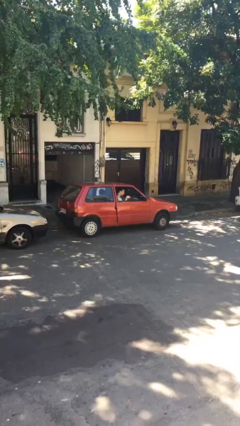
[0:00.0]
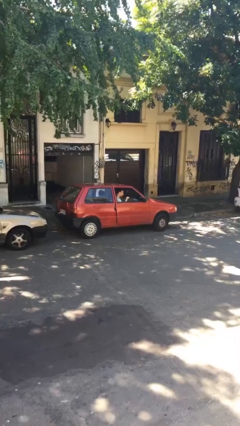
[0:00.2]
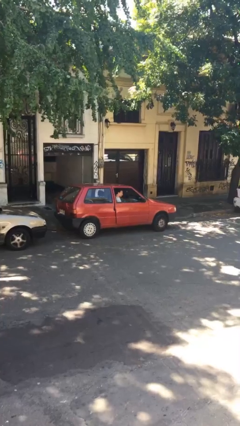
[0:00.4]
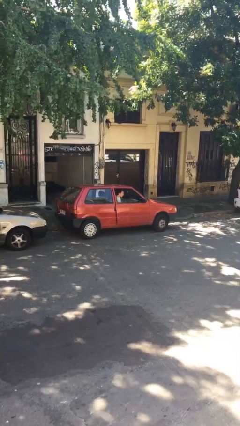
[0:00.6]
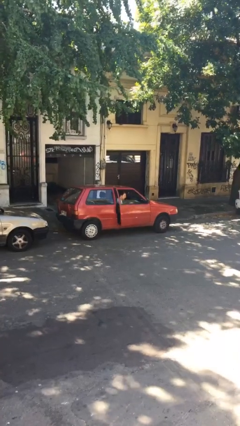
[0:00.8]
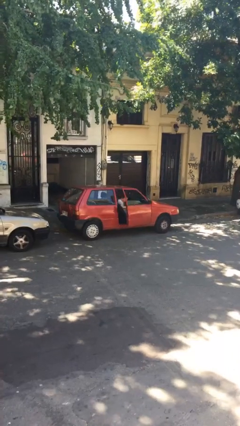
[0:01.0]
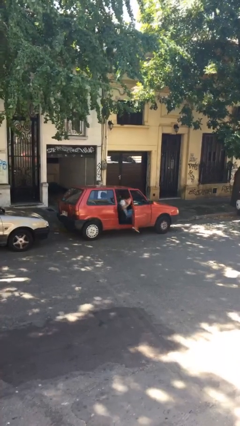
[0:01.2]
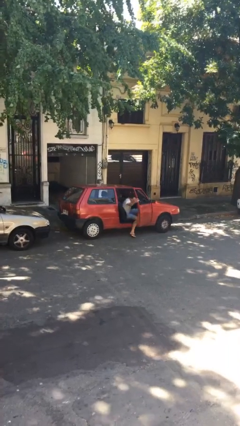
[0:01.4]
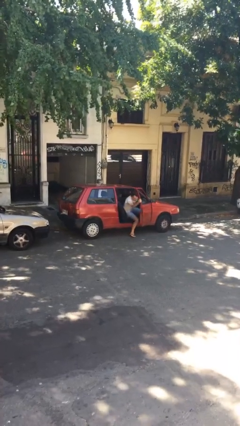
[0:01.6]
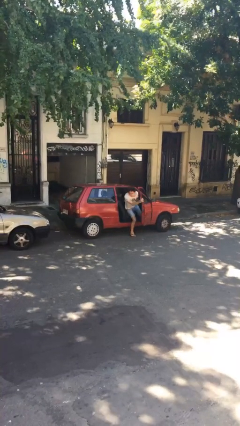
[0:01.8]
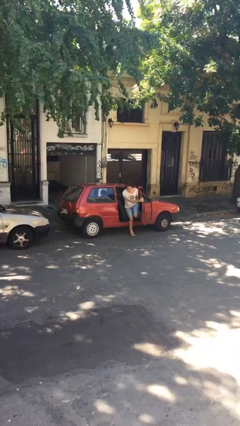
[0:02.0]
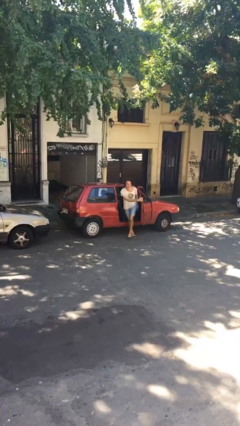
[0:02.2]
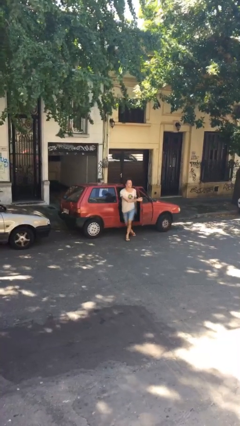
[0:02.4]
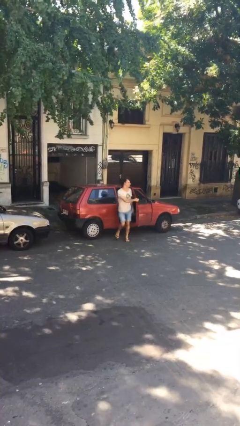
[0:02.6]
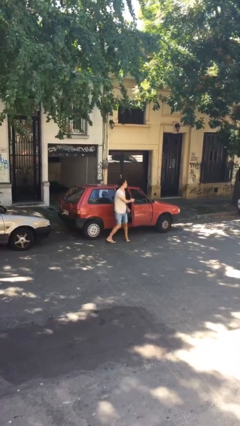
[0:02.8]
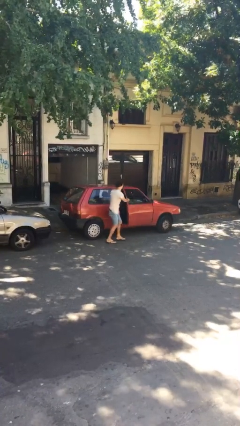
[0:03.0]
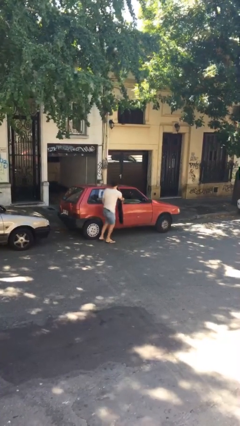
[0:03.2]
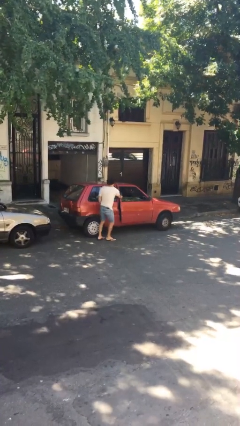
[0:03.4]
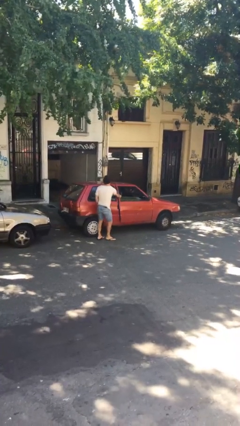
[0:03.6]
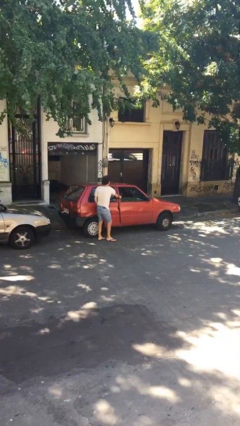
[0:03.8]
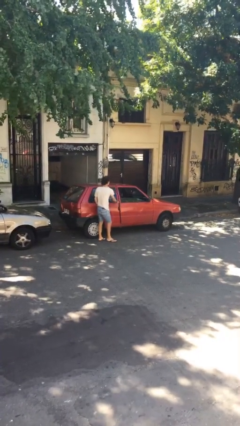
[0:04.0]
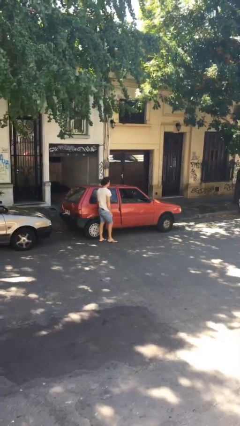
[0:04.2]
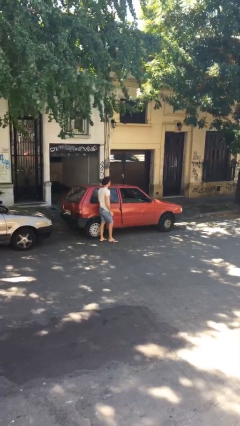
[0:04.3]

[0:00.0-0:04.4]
car drops off person

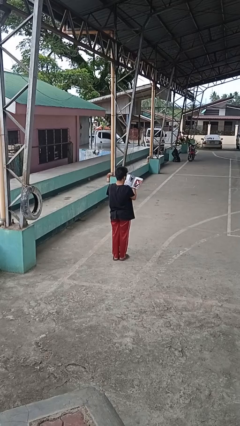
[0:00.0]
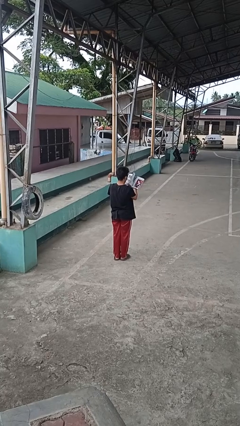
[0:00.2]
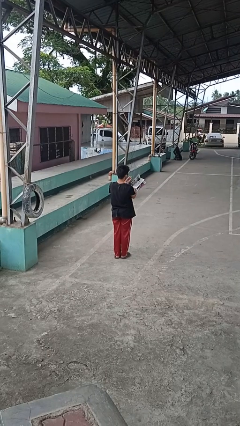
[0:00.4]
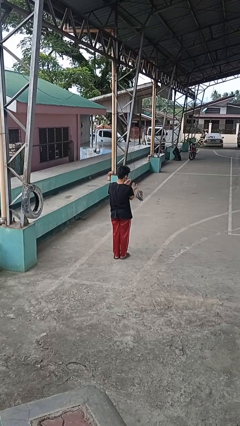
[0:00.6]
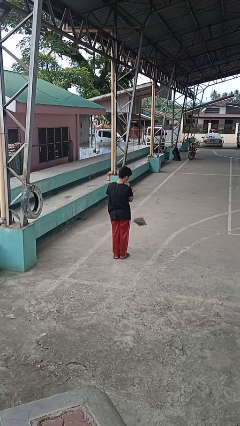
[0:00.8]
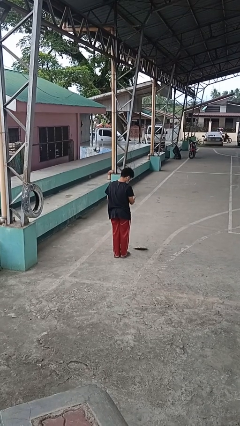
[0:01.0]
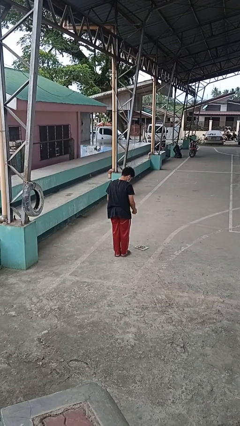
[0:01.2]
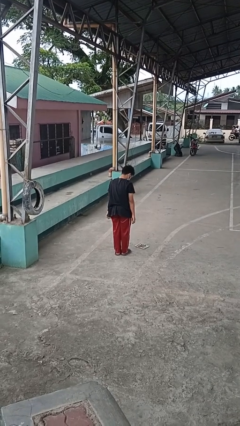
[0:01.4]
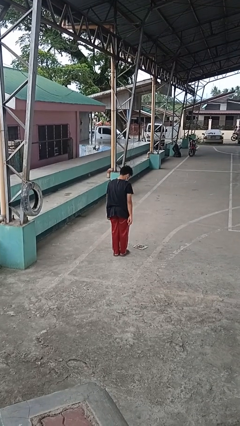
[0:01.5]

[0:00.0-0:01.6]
person drops object

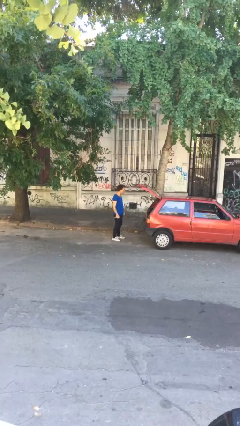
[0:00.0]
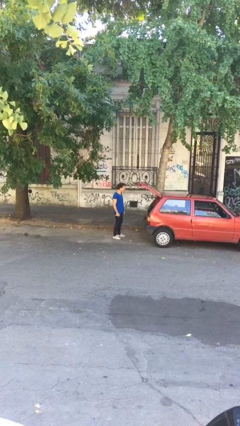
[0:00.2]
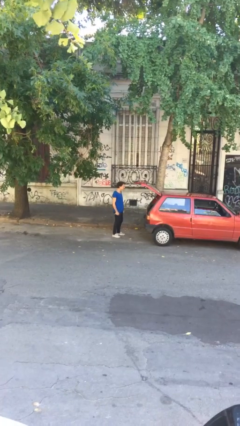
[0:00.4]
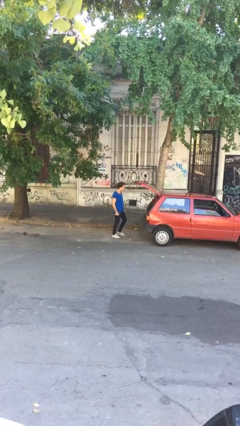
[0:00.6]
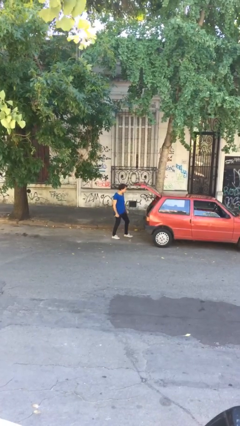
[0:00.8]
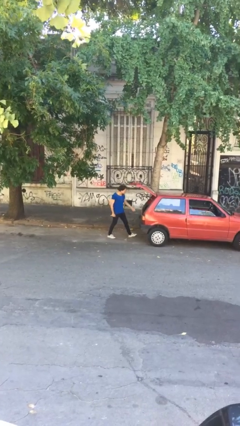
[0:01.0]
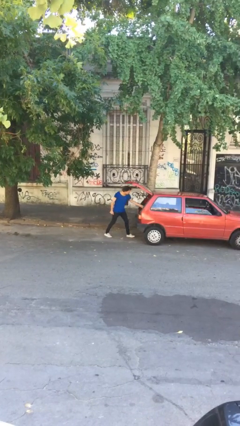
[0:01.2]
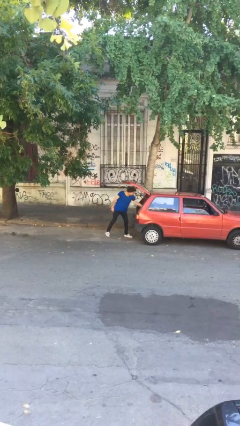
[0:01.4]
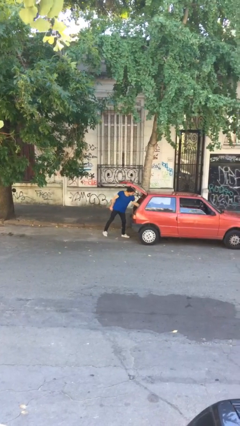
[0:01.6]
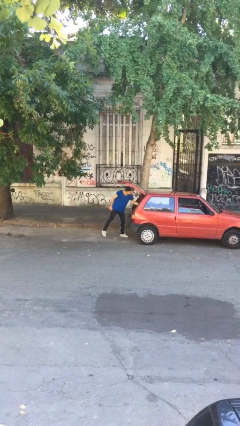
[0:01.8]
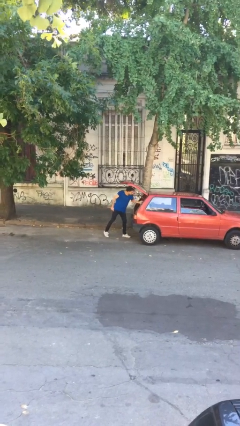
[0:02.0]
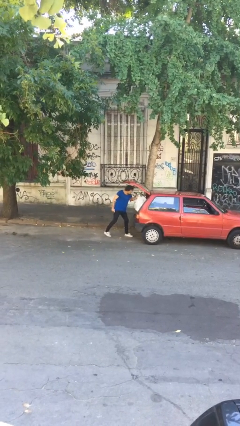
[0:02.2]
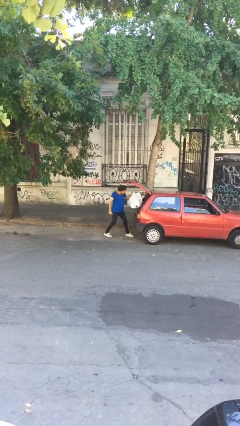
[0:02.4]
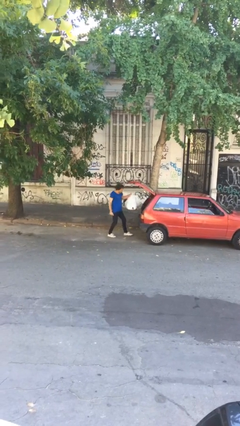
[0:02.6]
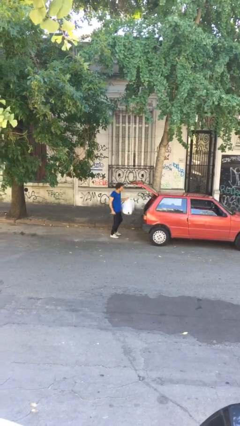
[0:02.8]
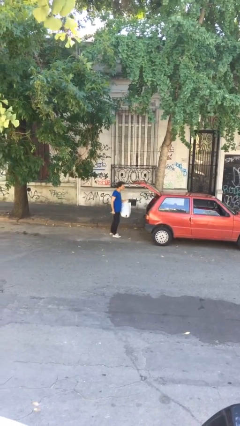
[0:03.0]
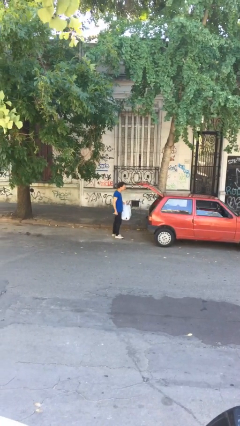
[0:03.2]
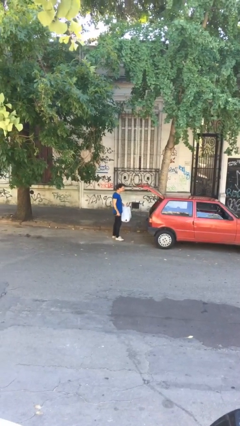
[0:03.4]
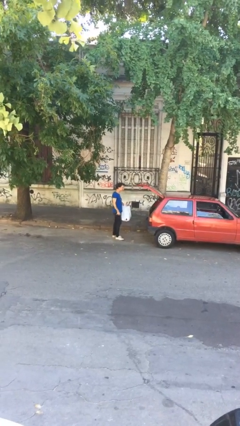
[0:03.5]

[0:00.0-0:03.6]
person unloads car

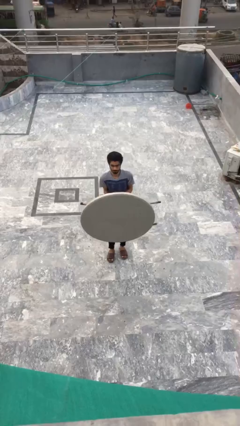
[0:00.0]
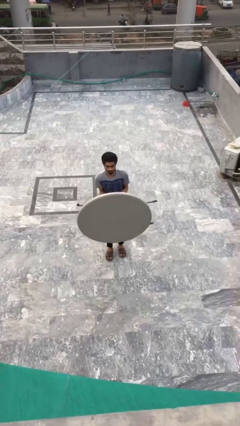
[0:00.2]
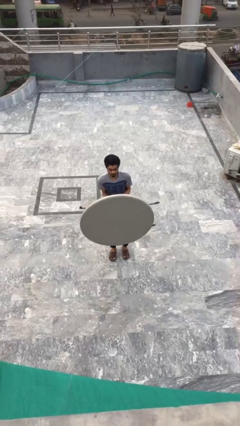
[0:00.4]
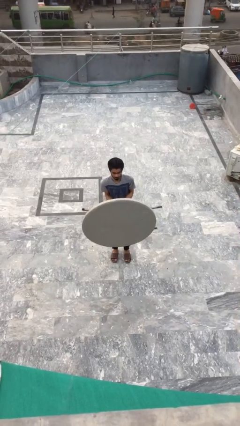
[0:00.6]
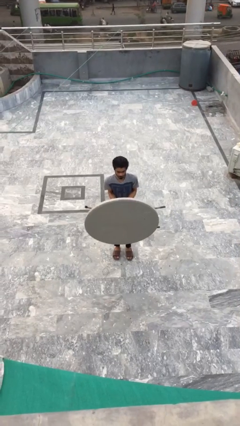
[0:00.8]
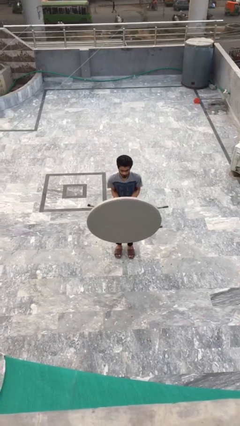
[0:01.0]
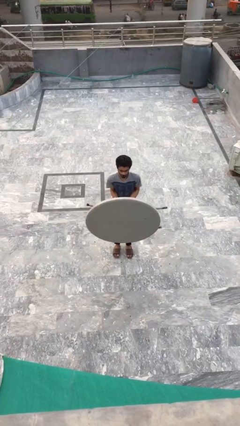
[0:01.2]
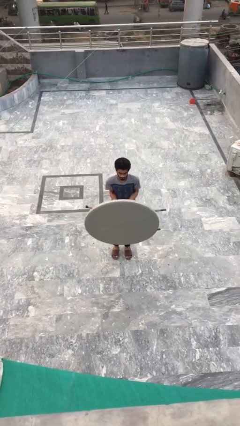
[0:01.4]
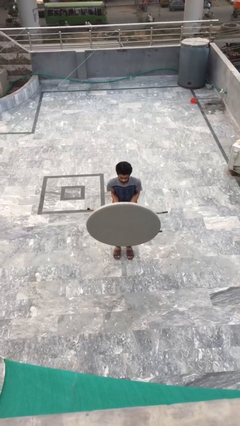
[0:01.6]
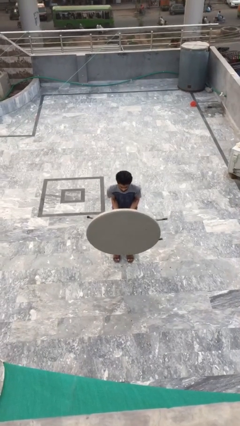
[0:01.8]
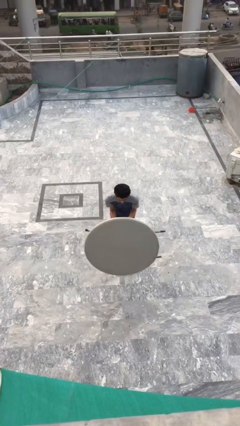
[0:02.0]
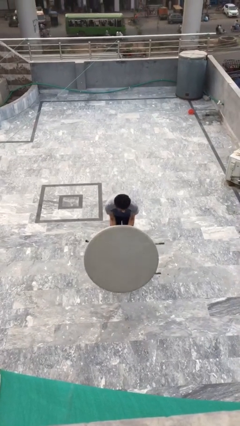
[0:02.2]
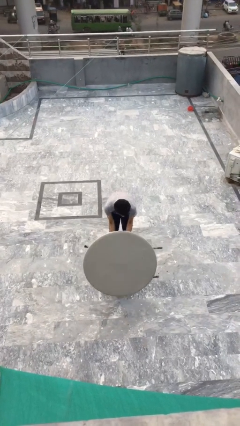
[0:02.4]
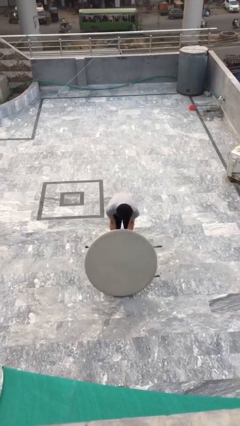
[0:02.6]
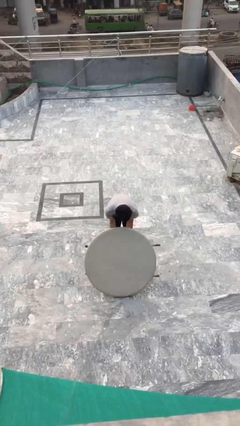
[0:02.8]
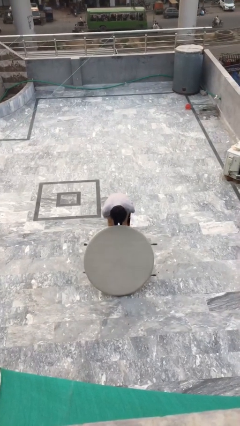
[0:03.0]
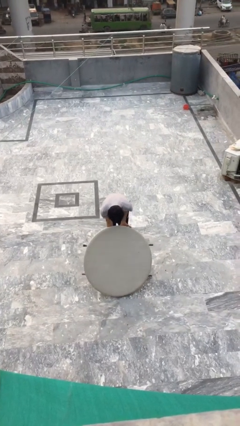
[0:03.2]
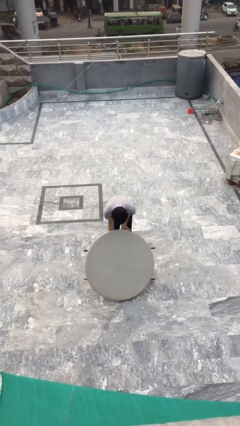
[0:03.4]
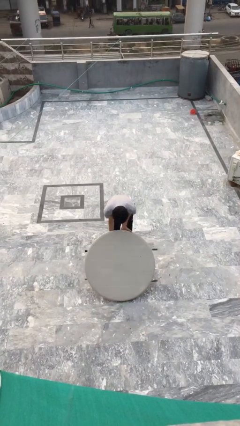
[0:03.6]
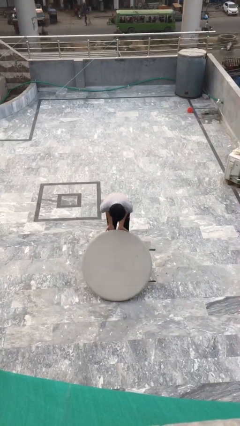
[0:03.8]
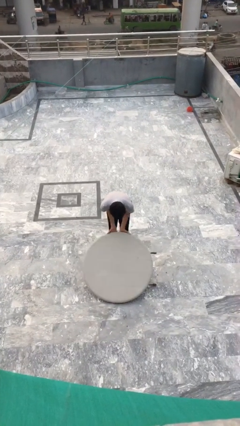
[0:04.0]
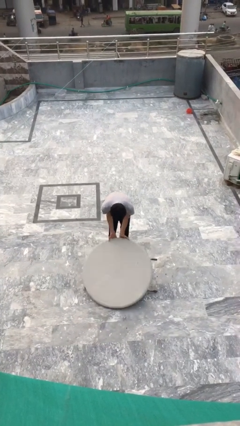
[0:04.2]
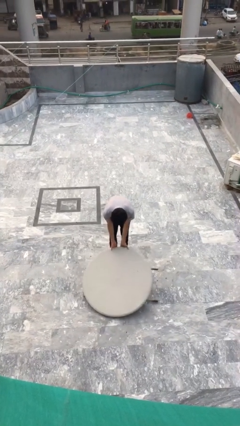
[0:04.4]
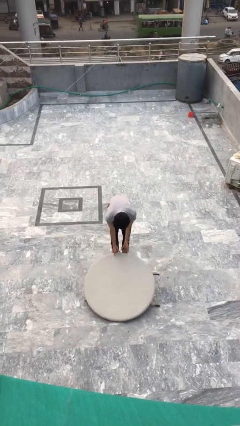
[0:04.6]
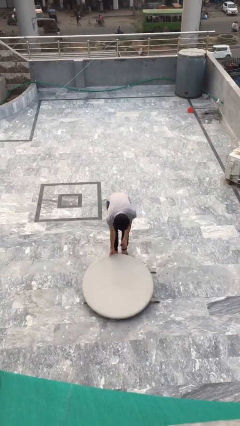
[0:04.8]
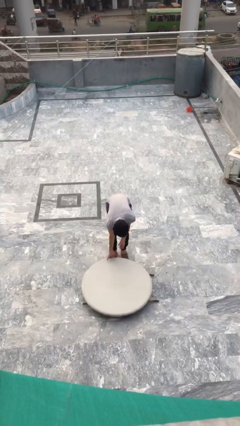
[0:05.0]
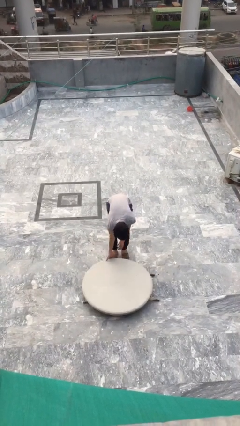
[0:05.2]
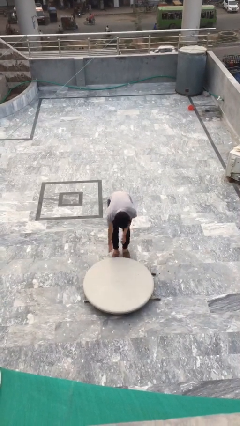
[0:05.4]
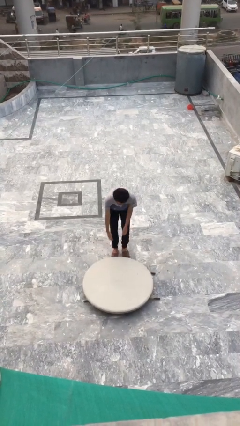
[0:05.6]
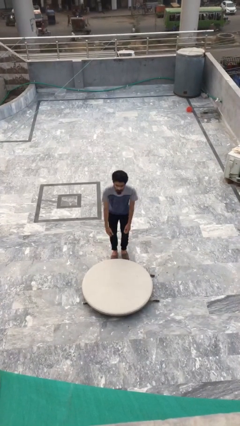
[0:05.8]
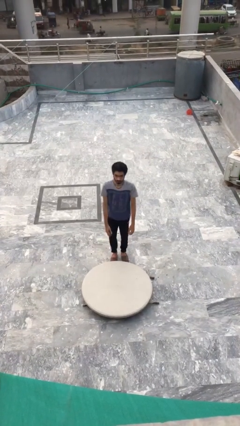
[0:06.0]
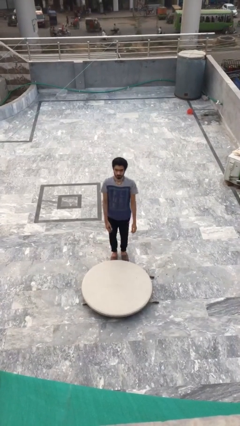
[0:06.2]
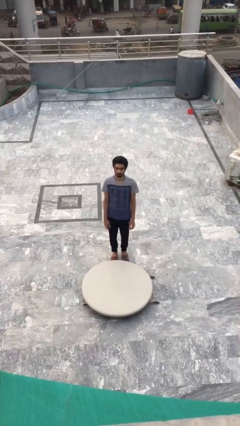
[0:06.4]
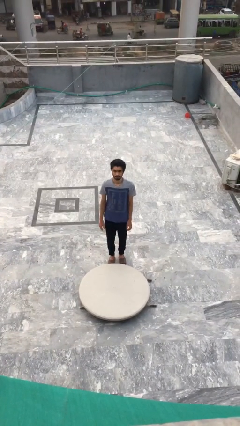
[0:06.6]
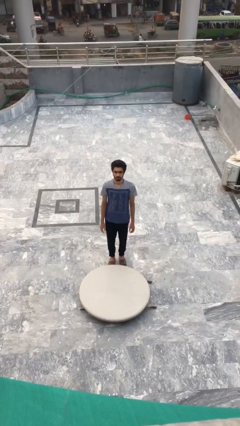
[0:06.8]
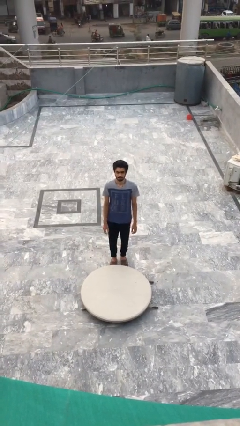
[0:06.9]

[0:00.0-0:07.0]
person puts down object on floor

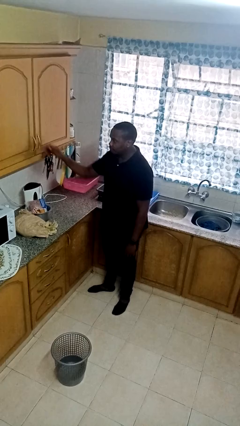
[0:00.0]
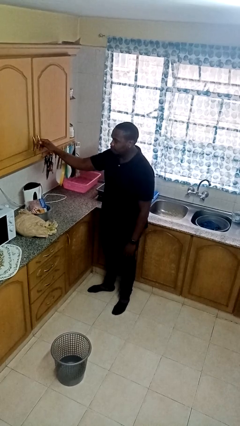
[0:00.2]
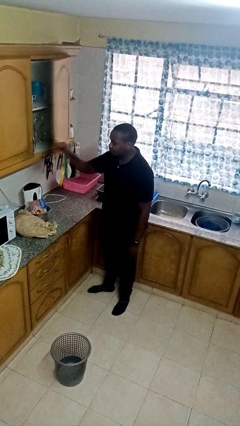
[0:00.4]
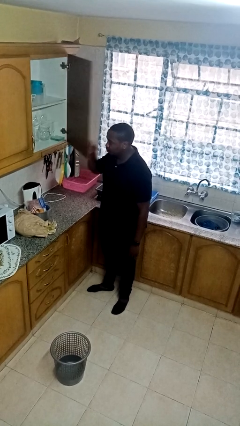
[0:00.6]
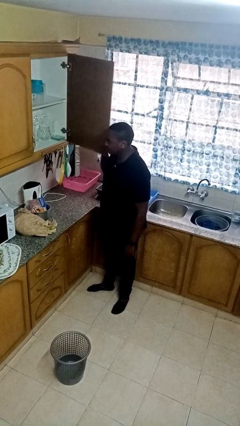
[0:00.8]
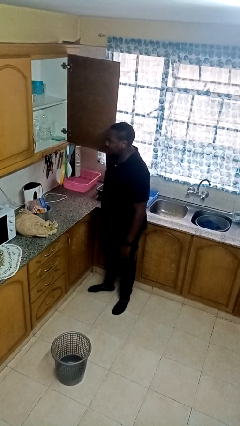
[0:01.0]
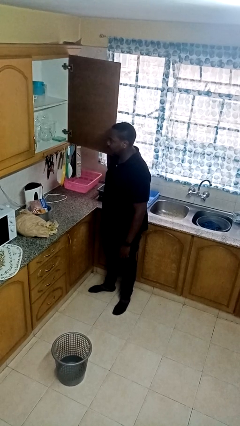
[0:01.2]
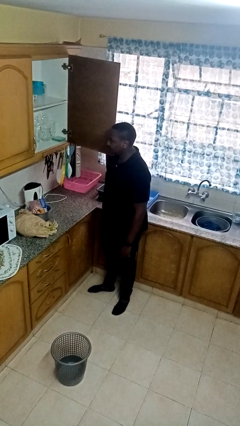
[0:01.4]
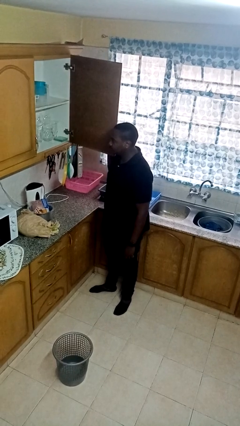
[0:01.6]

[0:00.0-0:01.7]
person opens cabinet
